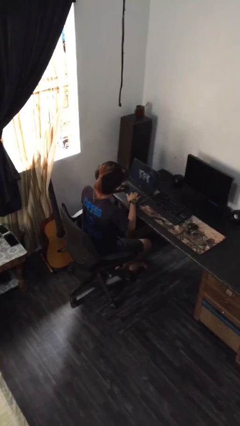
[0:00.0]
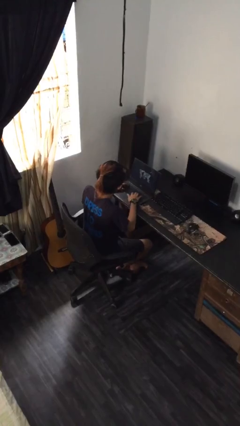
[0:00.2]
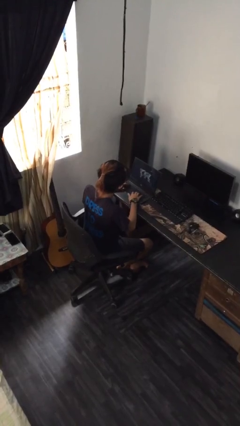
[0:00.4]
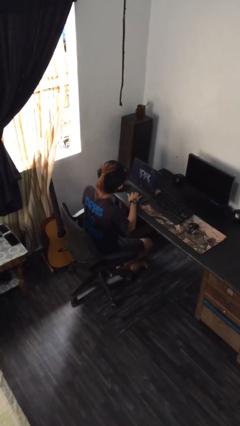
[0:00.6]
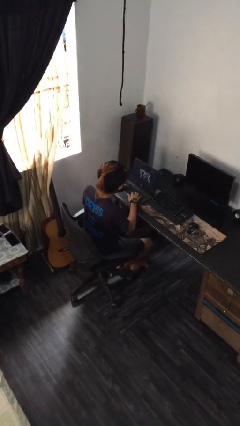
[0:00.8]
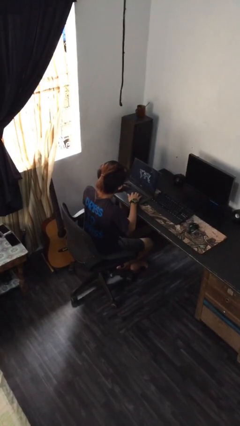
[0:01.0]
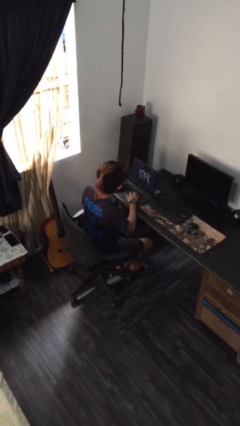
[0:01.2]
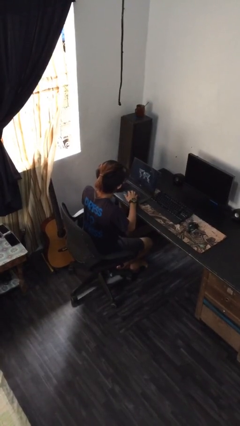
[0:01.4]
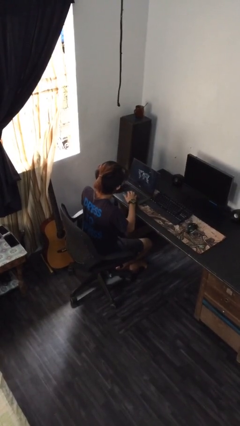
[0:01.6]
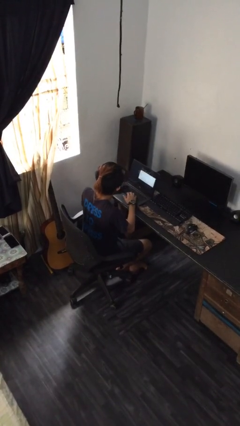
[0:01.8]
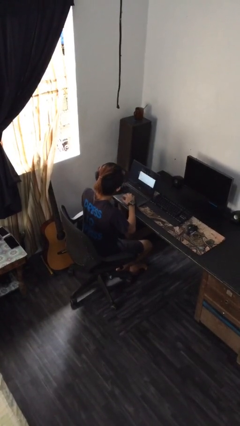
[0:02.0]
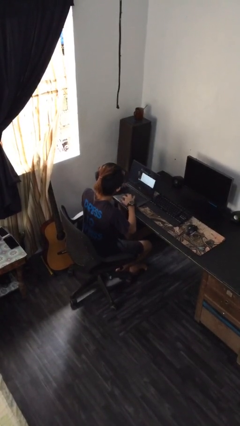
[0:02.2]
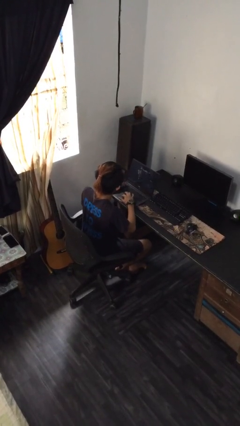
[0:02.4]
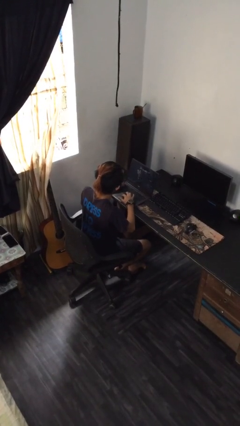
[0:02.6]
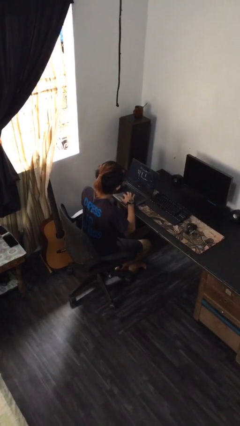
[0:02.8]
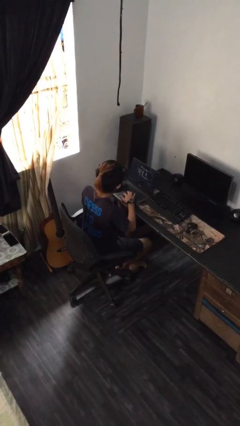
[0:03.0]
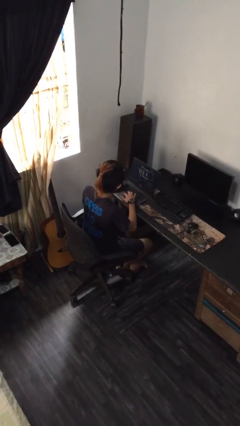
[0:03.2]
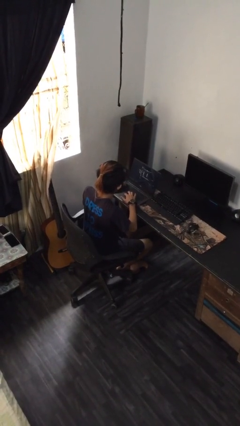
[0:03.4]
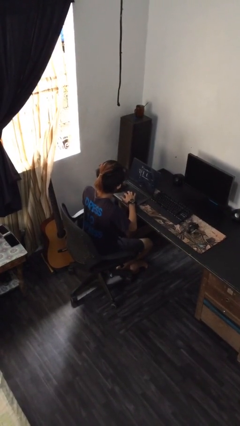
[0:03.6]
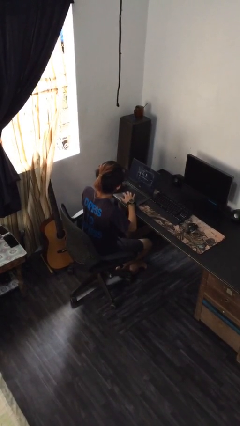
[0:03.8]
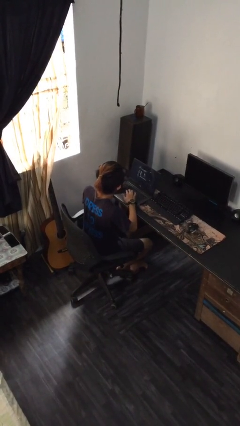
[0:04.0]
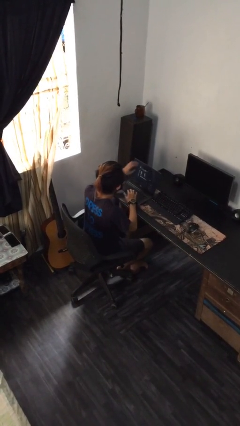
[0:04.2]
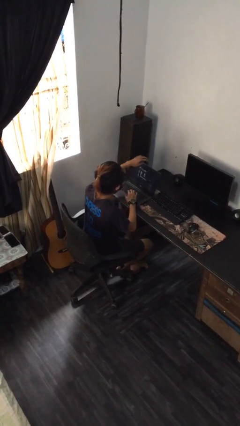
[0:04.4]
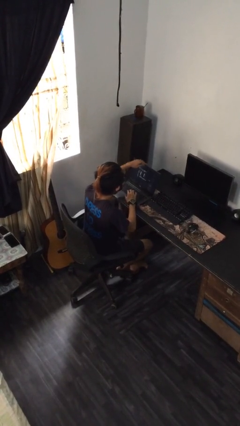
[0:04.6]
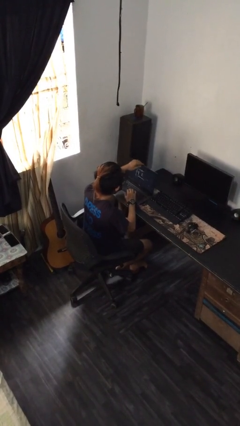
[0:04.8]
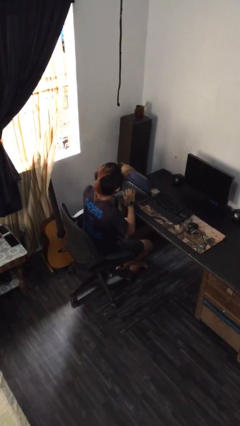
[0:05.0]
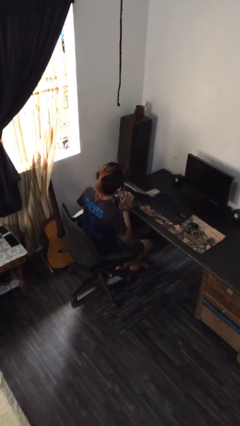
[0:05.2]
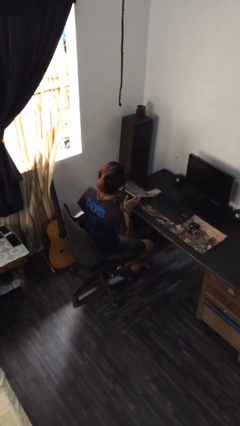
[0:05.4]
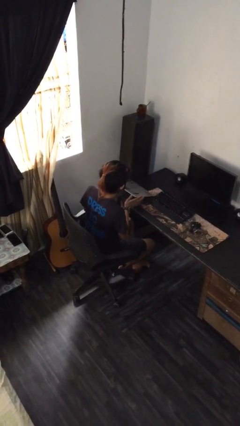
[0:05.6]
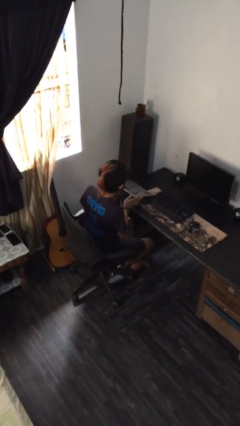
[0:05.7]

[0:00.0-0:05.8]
person interacts with laptop

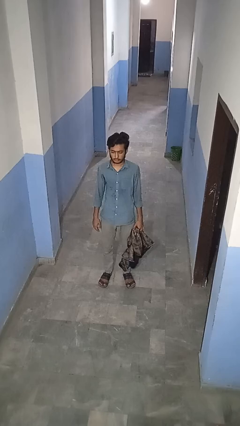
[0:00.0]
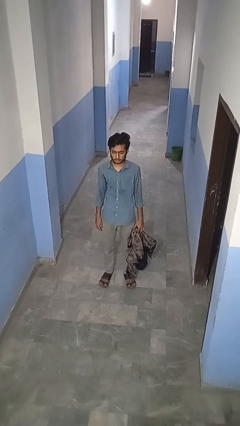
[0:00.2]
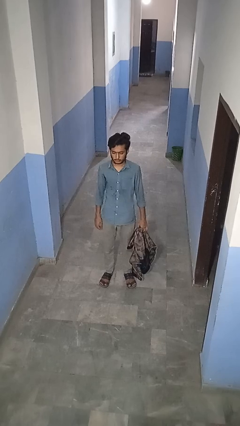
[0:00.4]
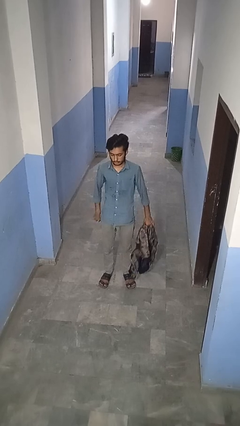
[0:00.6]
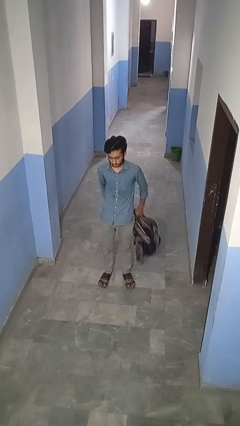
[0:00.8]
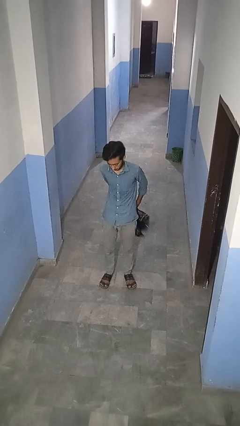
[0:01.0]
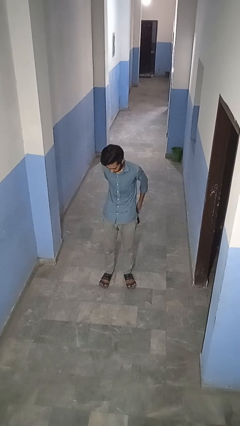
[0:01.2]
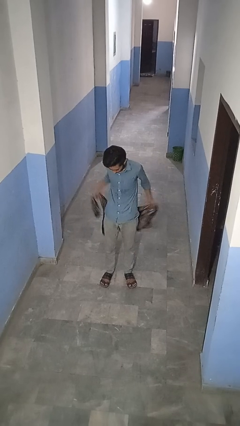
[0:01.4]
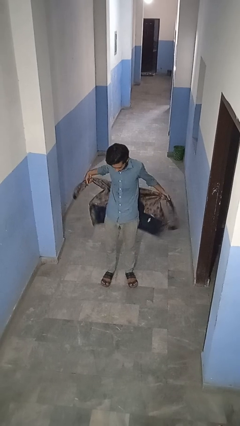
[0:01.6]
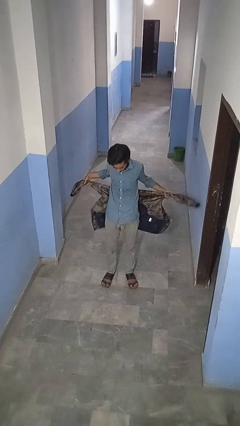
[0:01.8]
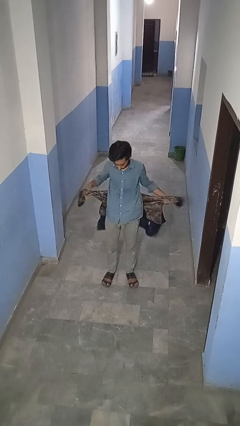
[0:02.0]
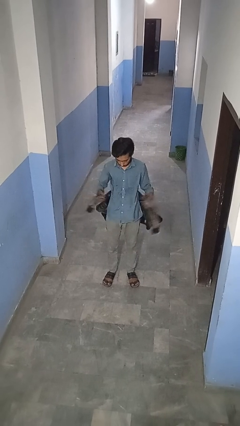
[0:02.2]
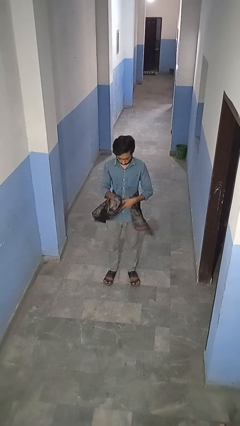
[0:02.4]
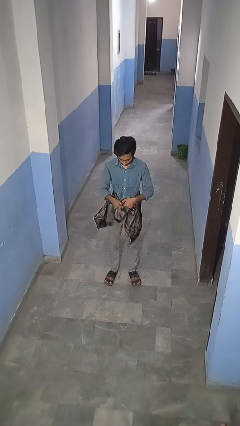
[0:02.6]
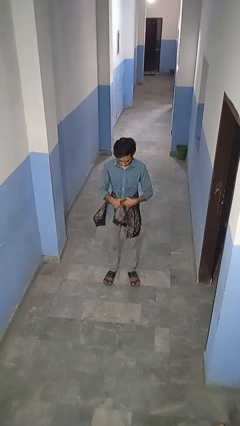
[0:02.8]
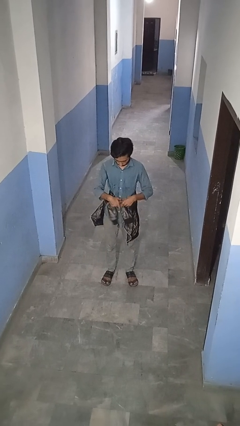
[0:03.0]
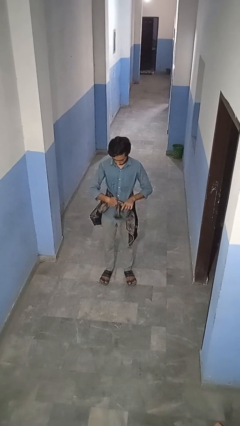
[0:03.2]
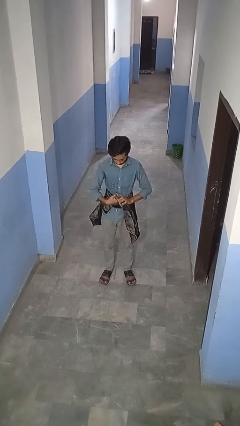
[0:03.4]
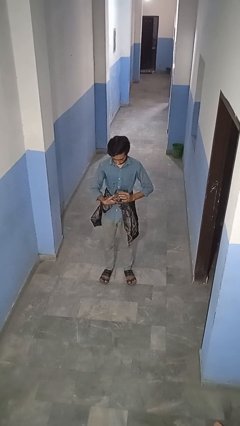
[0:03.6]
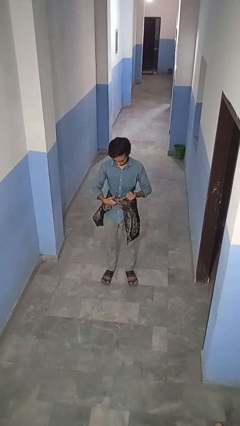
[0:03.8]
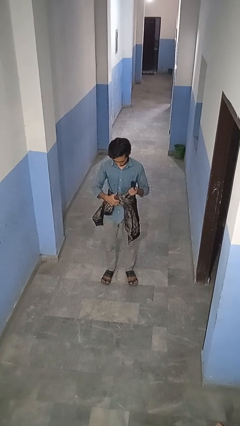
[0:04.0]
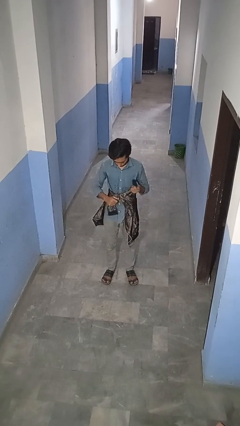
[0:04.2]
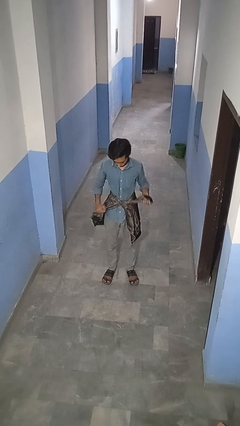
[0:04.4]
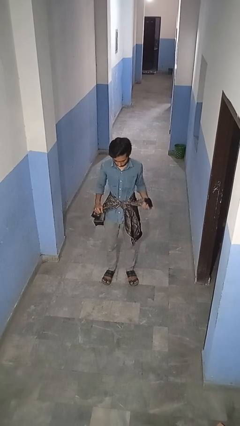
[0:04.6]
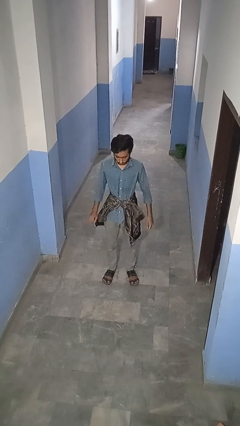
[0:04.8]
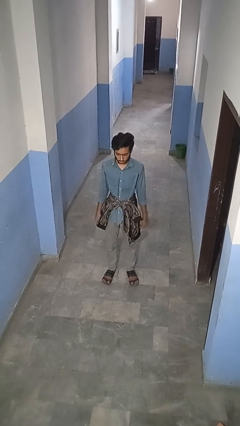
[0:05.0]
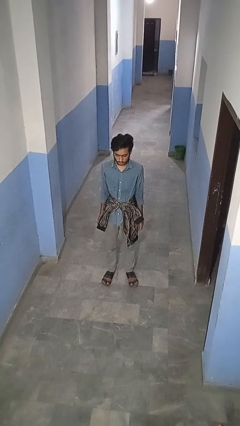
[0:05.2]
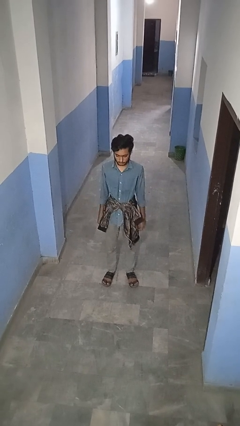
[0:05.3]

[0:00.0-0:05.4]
person ties jacket around waist

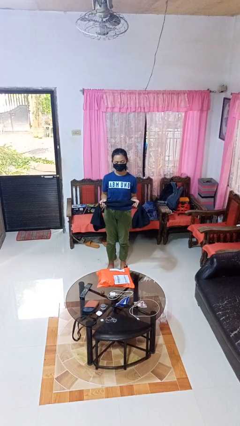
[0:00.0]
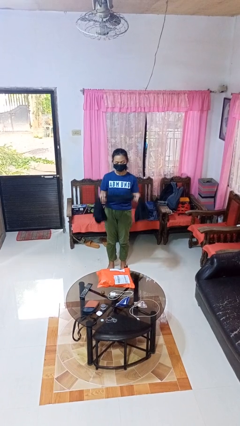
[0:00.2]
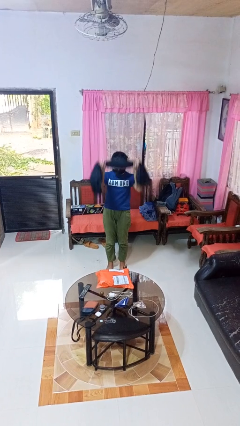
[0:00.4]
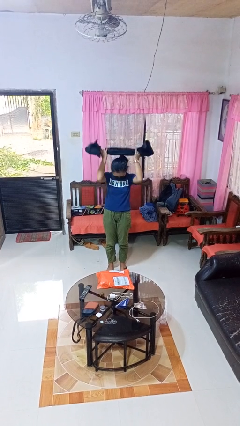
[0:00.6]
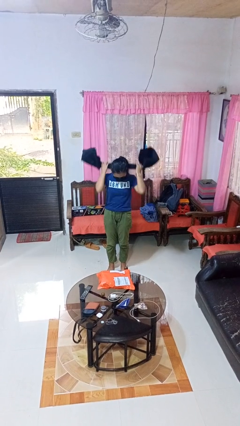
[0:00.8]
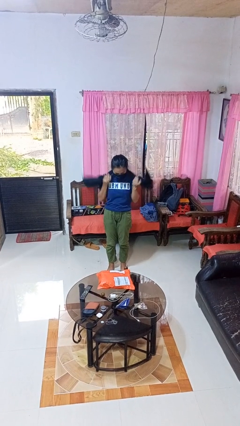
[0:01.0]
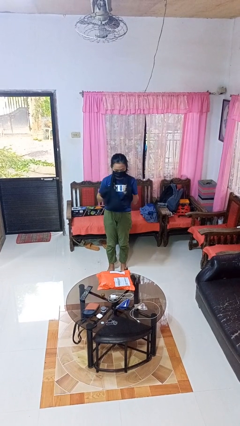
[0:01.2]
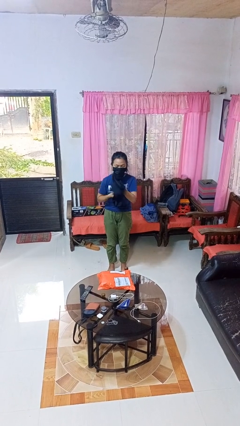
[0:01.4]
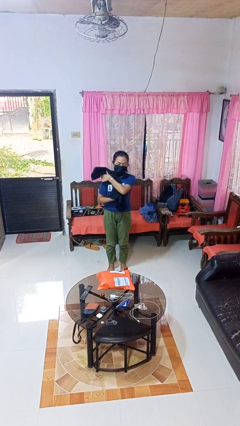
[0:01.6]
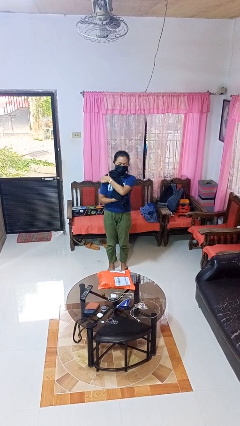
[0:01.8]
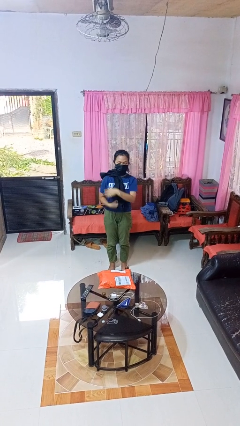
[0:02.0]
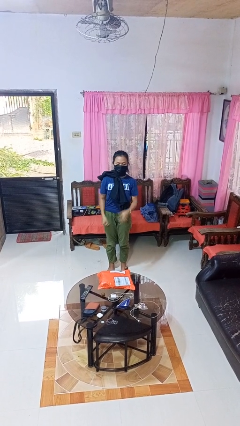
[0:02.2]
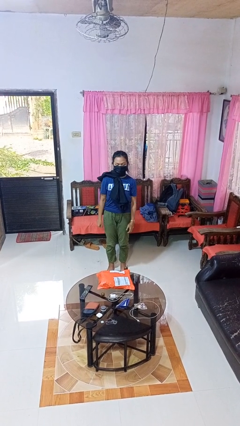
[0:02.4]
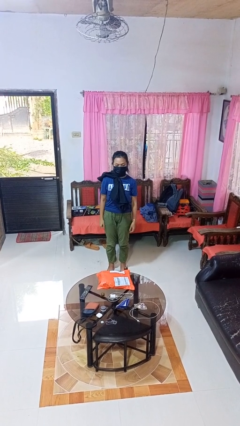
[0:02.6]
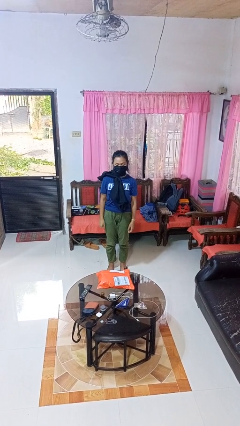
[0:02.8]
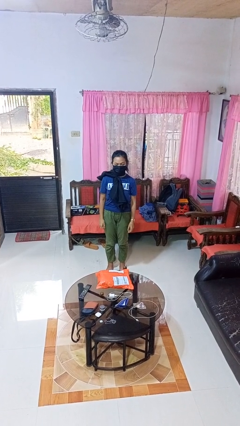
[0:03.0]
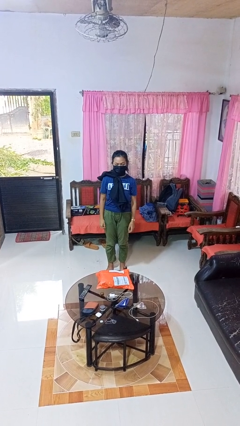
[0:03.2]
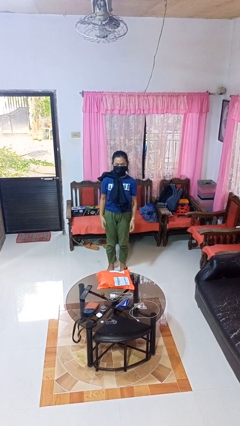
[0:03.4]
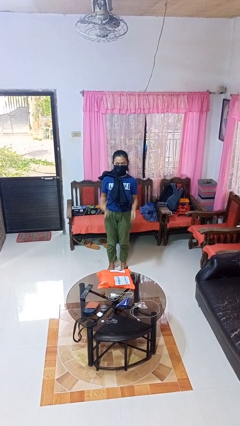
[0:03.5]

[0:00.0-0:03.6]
person puts on scarf

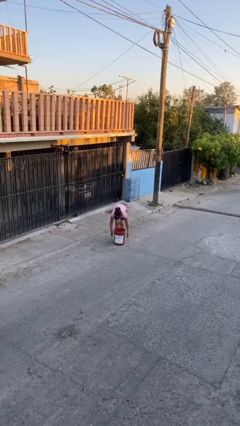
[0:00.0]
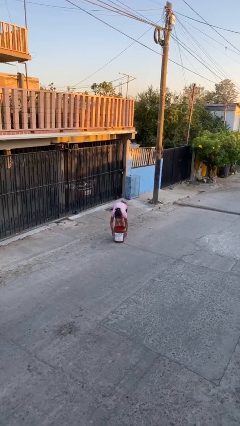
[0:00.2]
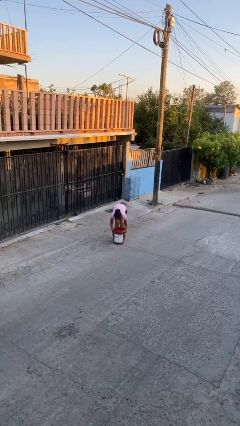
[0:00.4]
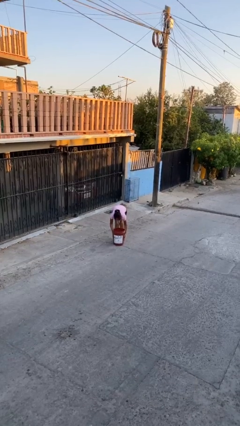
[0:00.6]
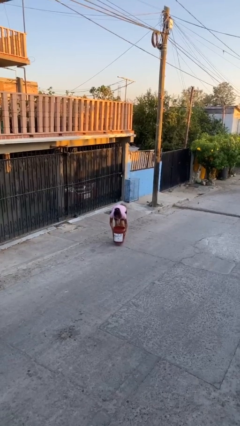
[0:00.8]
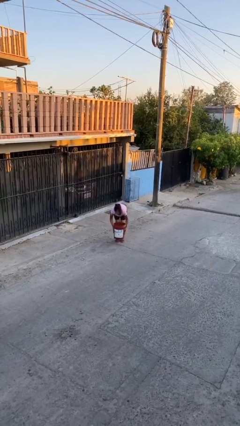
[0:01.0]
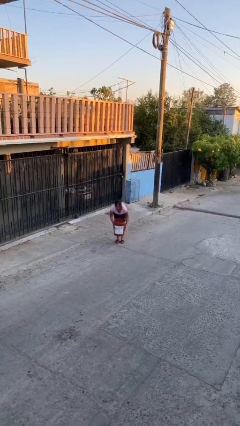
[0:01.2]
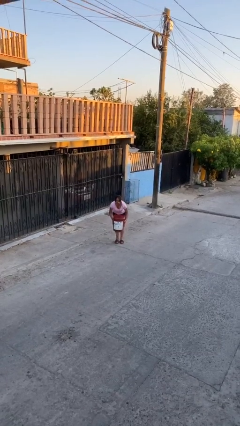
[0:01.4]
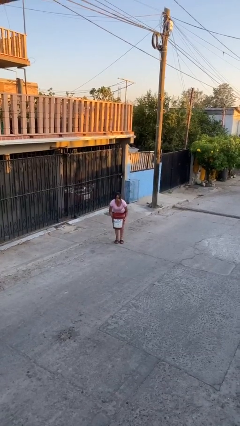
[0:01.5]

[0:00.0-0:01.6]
person picks up object from floor

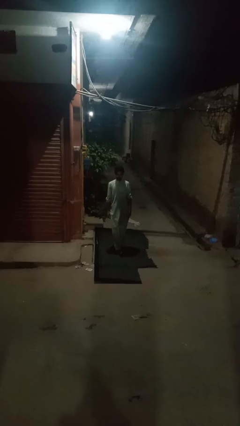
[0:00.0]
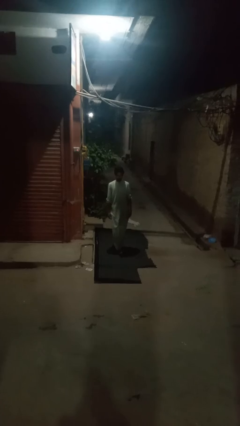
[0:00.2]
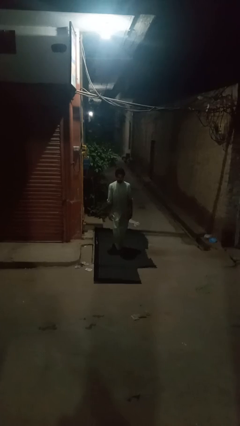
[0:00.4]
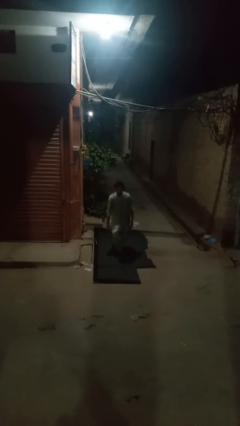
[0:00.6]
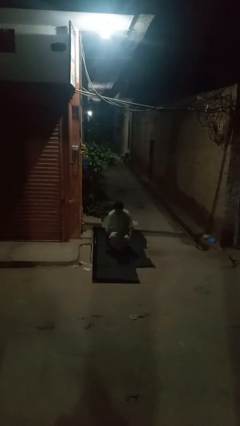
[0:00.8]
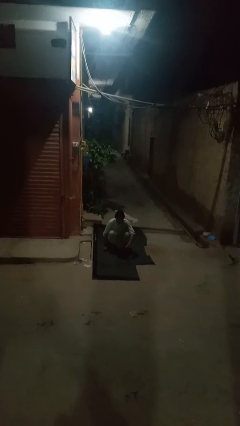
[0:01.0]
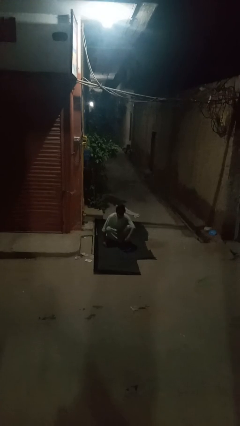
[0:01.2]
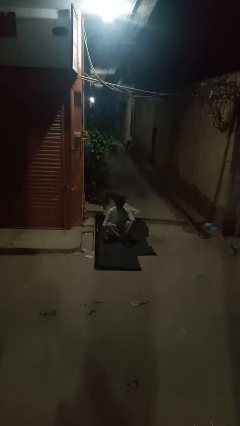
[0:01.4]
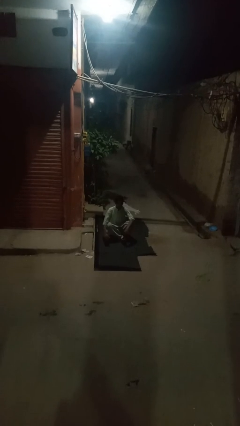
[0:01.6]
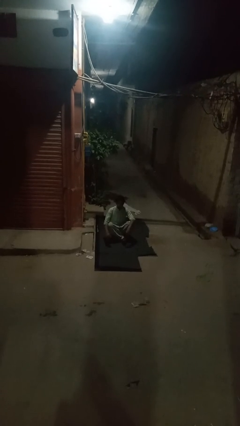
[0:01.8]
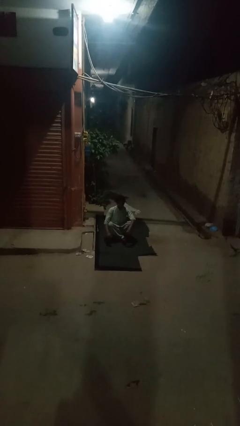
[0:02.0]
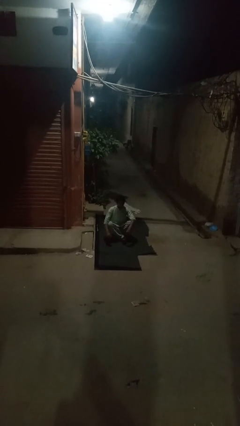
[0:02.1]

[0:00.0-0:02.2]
person sits crisscross
